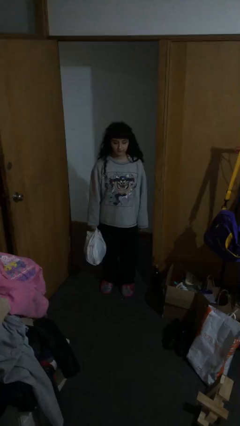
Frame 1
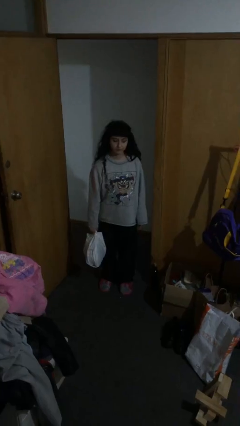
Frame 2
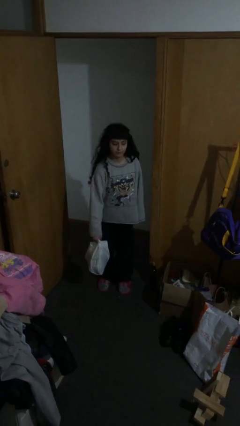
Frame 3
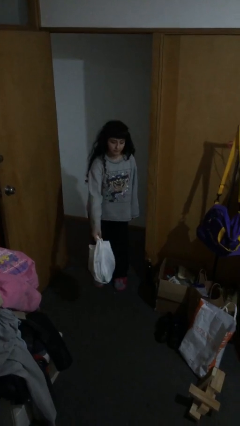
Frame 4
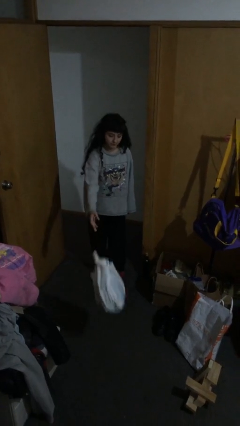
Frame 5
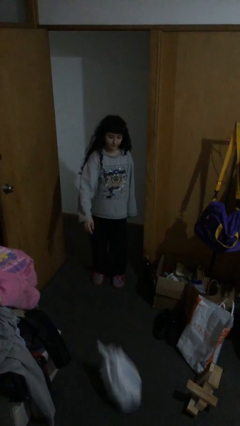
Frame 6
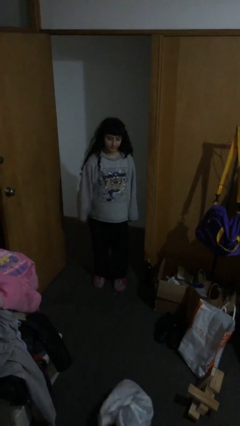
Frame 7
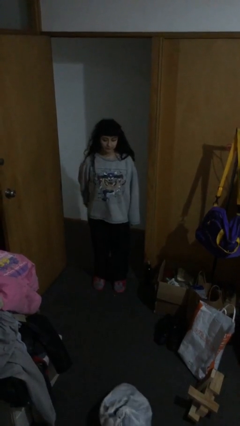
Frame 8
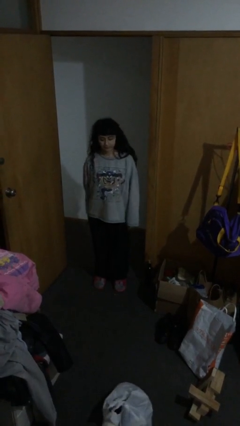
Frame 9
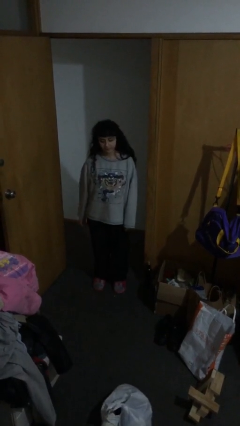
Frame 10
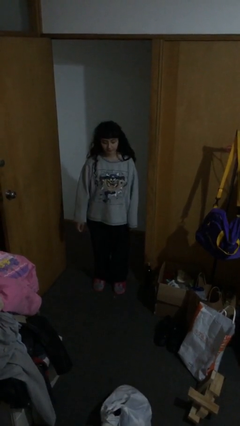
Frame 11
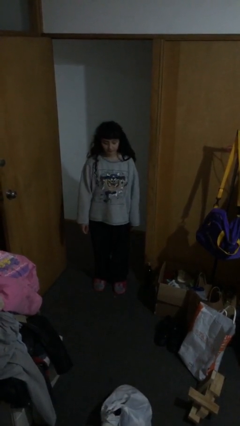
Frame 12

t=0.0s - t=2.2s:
person throws object to ground

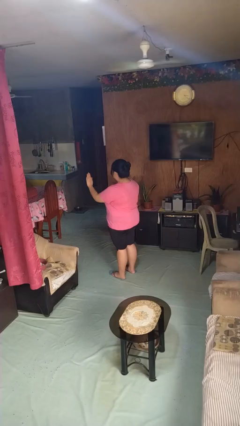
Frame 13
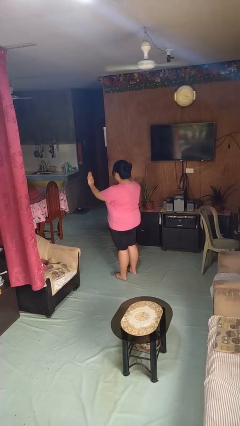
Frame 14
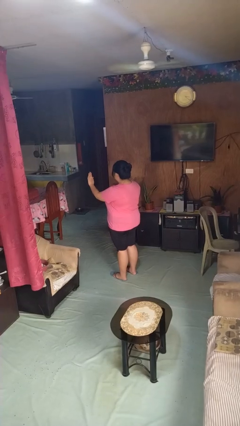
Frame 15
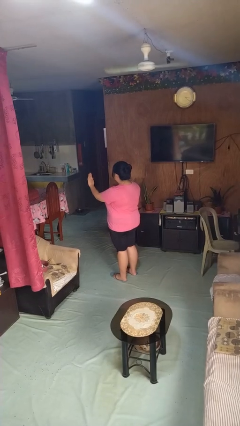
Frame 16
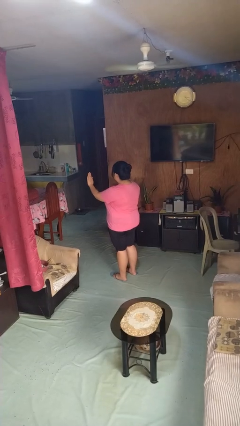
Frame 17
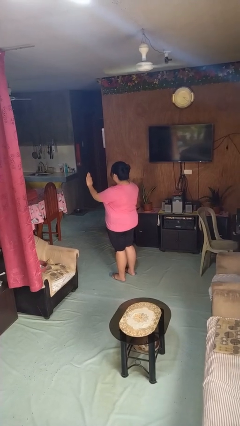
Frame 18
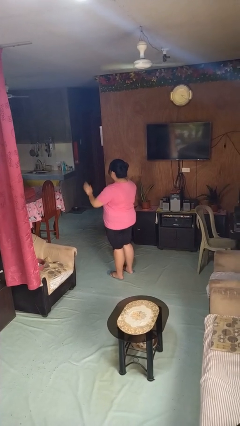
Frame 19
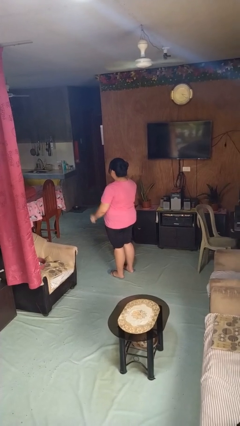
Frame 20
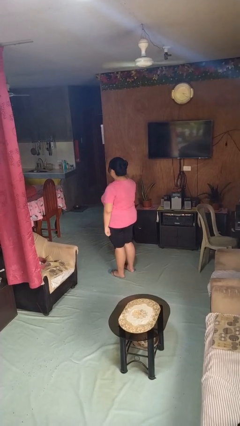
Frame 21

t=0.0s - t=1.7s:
person gestures stop

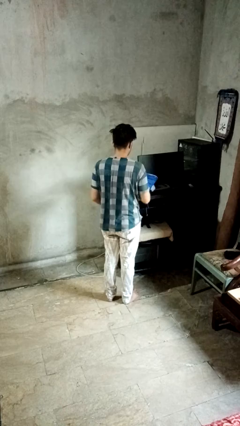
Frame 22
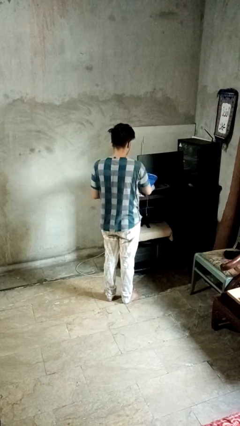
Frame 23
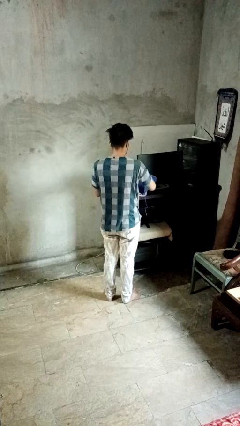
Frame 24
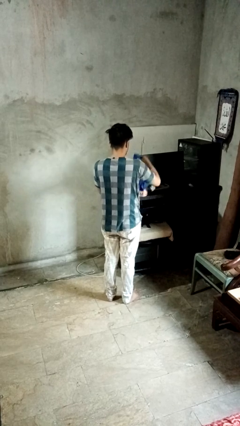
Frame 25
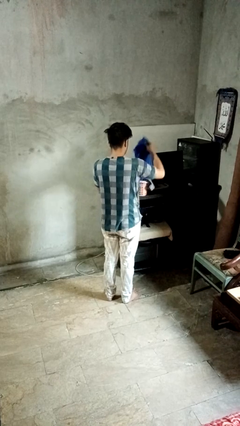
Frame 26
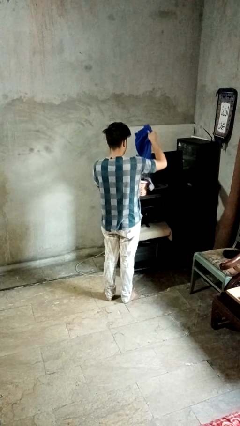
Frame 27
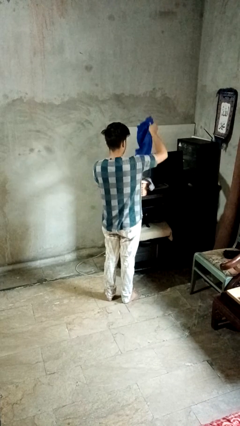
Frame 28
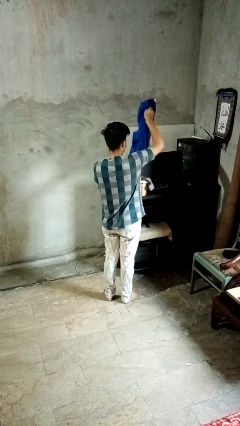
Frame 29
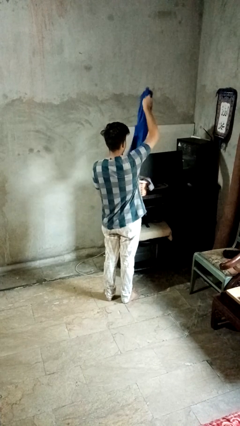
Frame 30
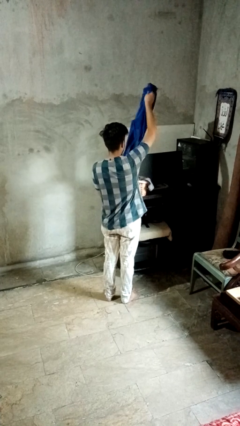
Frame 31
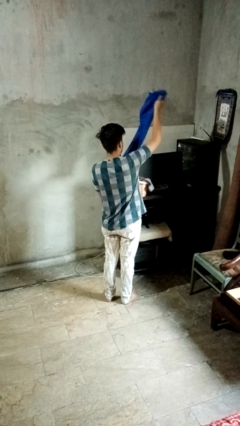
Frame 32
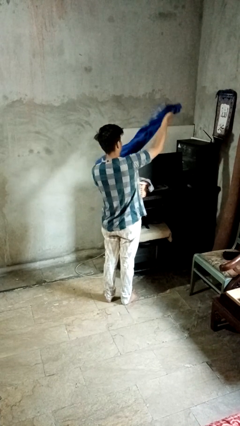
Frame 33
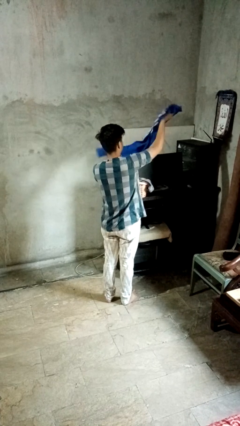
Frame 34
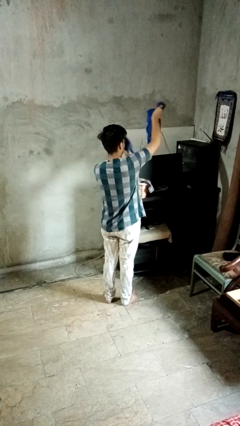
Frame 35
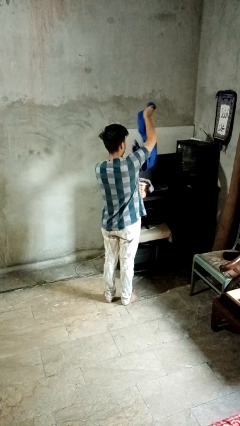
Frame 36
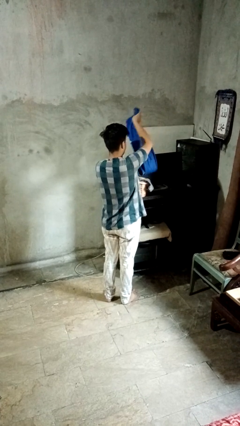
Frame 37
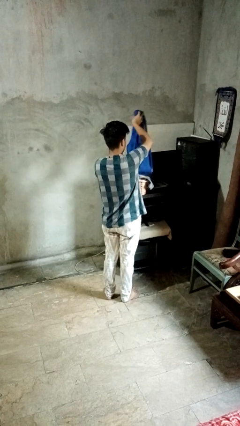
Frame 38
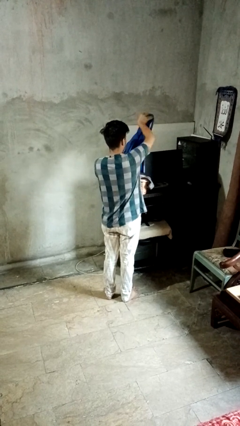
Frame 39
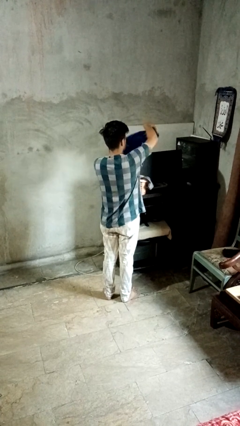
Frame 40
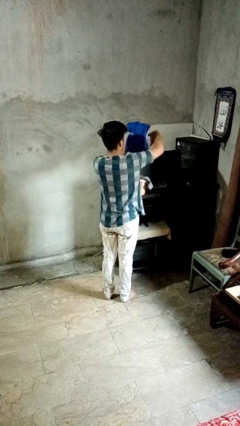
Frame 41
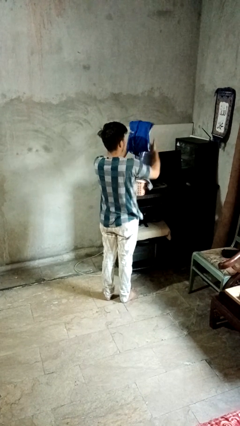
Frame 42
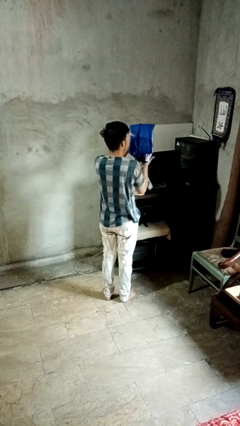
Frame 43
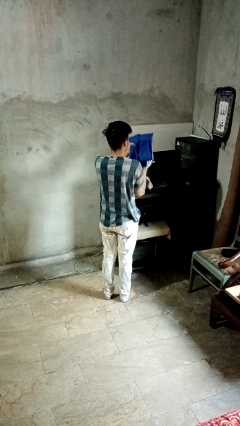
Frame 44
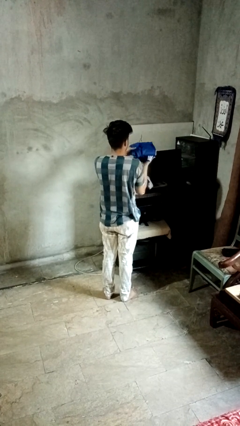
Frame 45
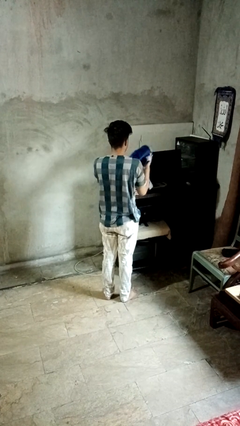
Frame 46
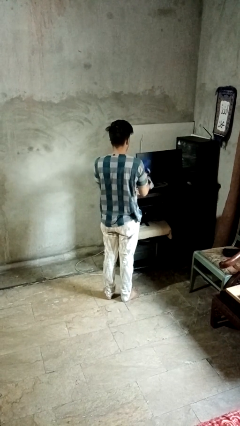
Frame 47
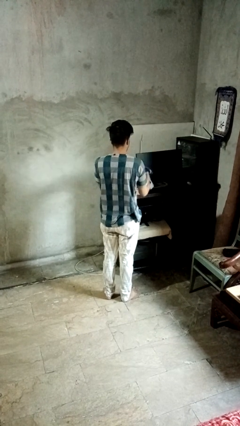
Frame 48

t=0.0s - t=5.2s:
person folds pants

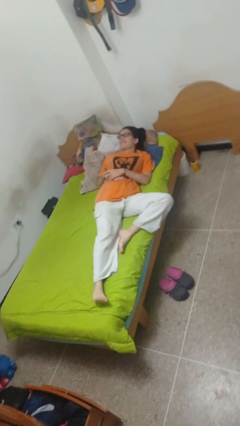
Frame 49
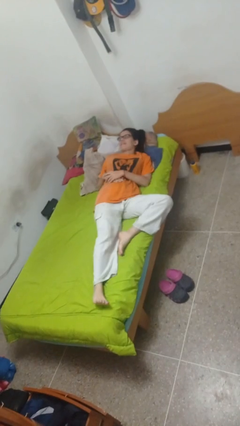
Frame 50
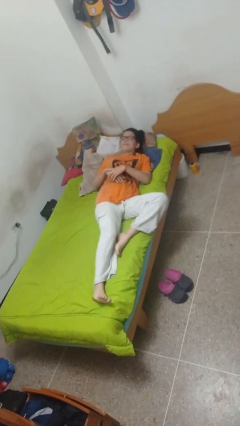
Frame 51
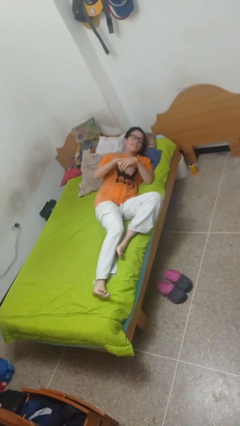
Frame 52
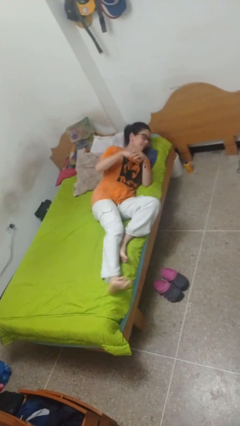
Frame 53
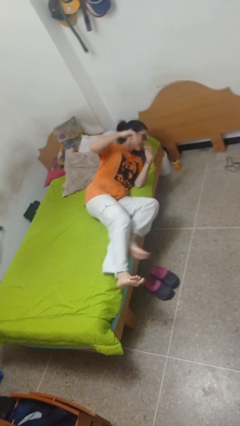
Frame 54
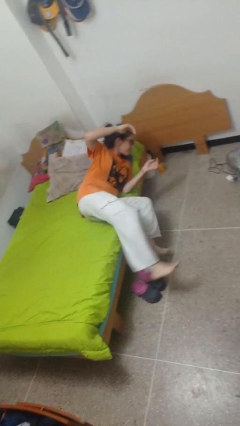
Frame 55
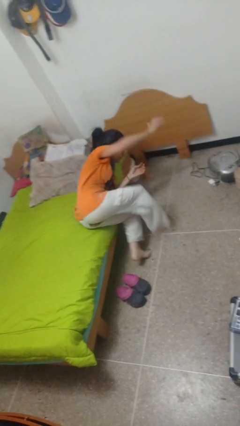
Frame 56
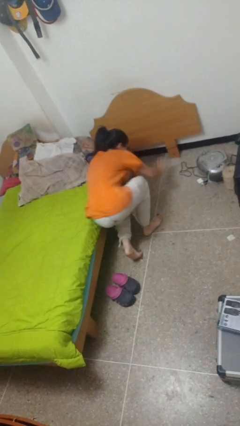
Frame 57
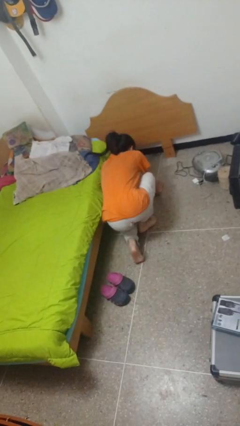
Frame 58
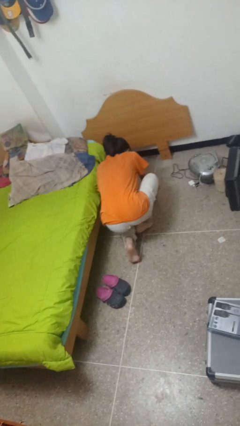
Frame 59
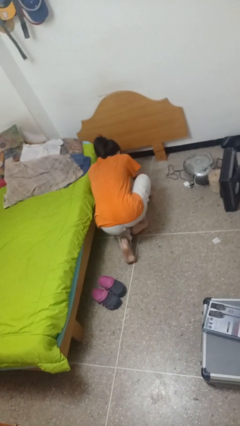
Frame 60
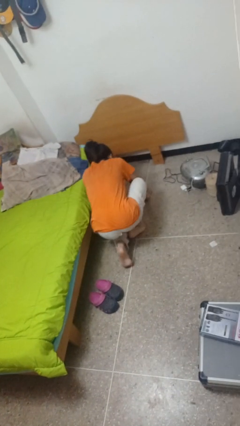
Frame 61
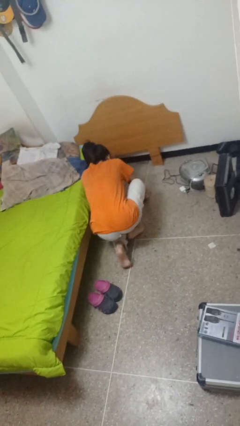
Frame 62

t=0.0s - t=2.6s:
person falls from bed

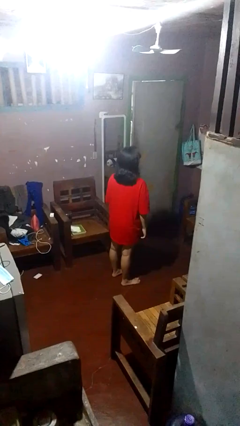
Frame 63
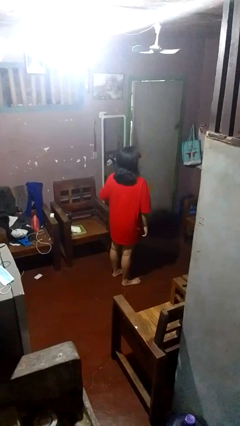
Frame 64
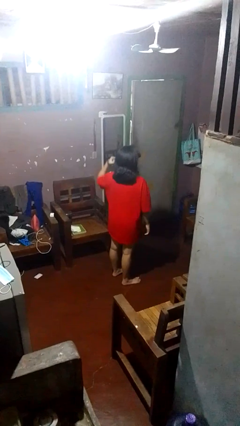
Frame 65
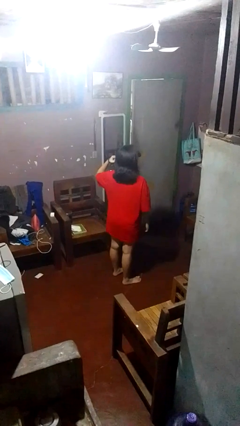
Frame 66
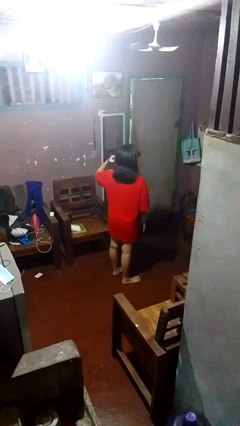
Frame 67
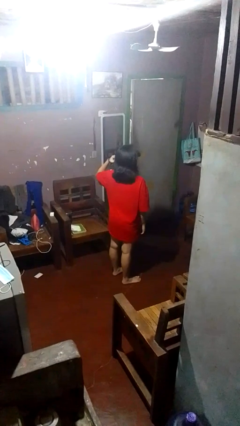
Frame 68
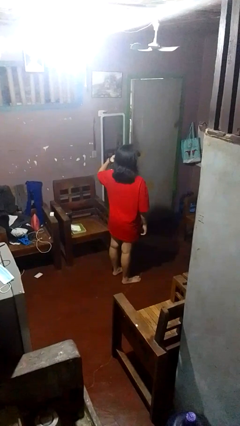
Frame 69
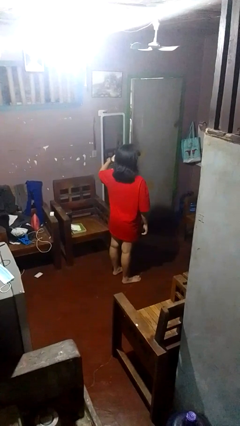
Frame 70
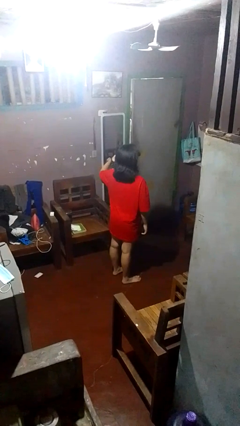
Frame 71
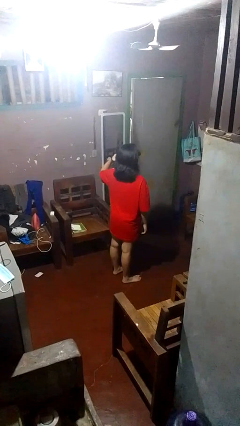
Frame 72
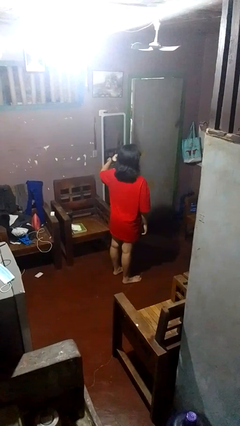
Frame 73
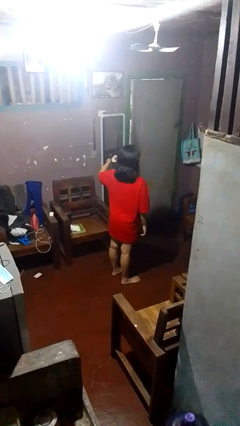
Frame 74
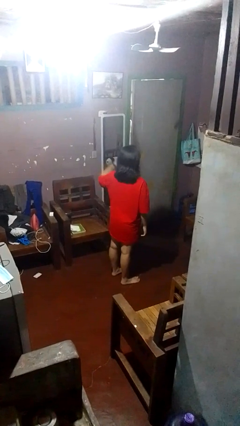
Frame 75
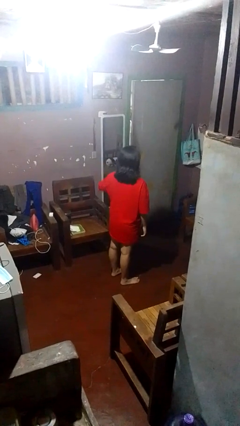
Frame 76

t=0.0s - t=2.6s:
person gestures listen closely

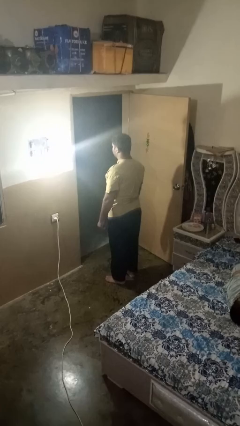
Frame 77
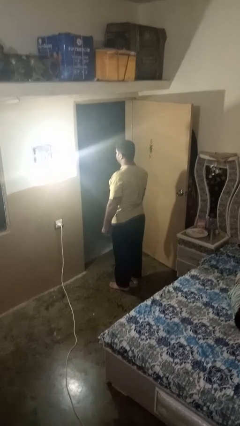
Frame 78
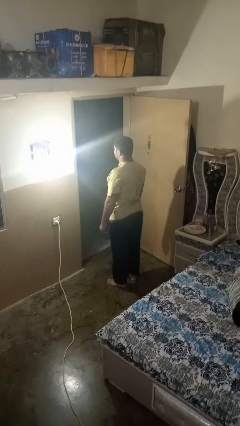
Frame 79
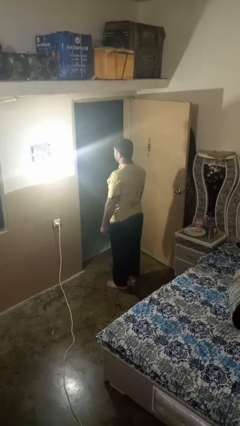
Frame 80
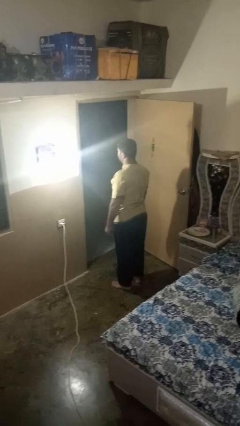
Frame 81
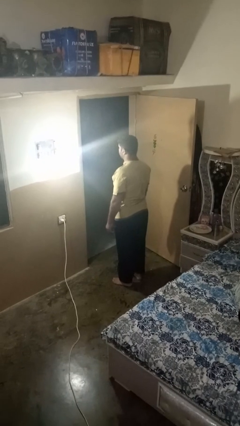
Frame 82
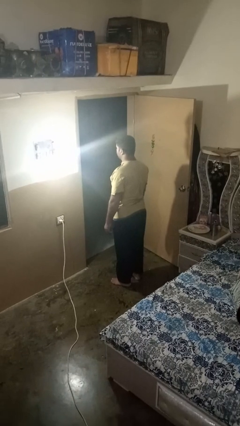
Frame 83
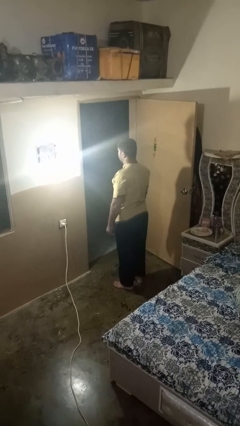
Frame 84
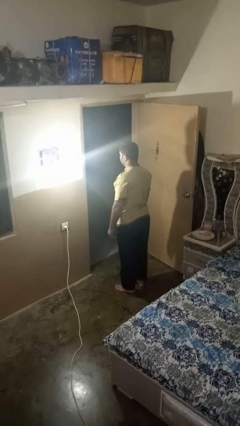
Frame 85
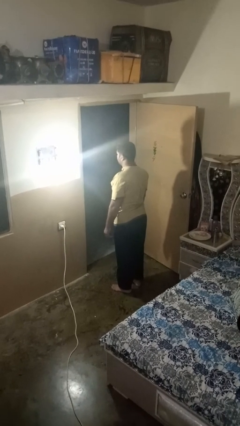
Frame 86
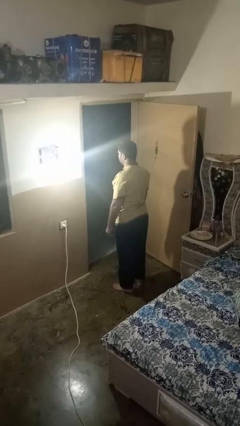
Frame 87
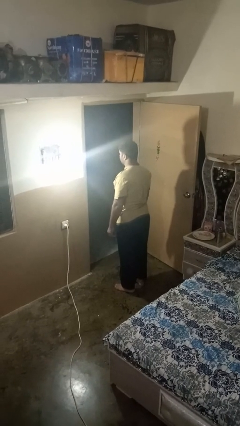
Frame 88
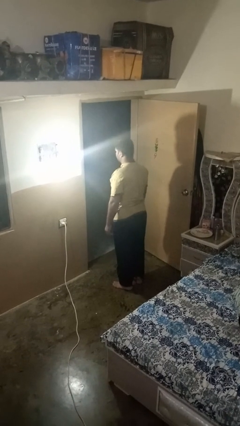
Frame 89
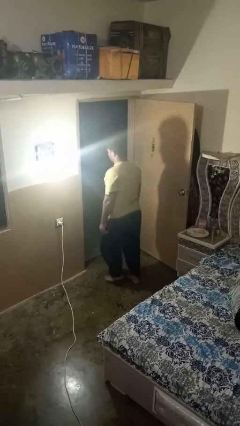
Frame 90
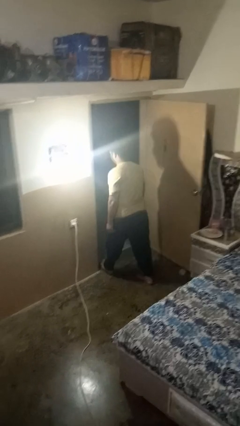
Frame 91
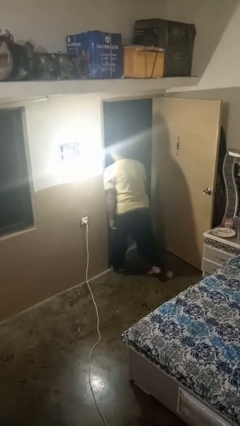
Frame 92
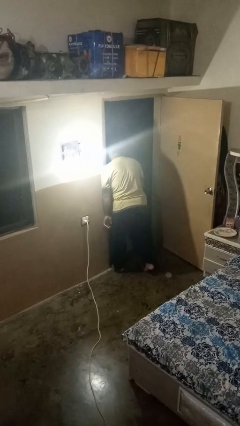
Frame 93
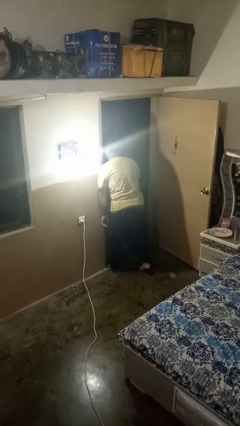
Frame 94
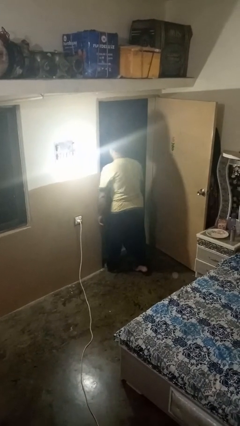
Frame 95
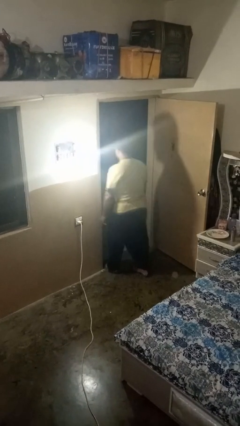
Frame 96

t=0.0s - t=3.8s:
person bumps into wall
